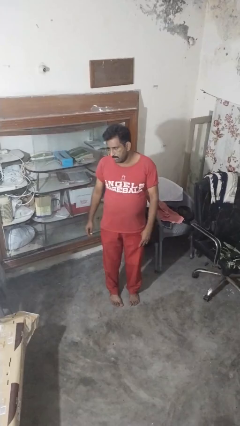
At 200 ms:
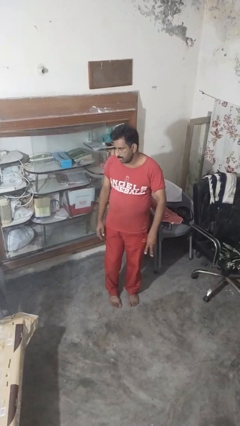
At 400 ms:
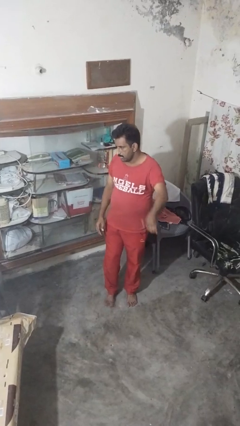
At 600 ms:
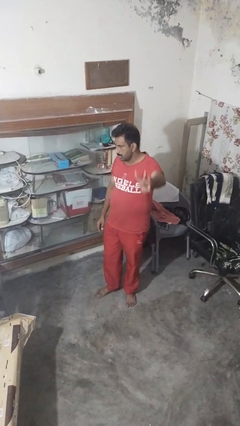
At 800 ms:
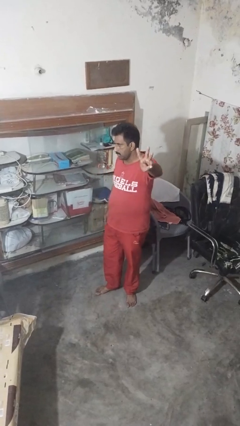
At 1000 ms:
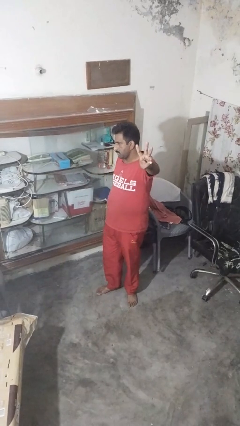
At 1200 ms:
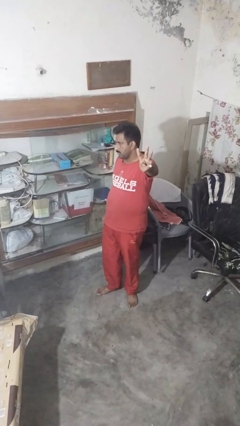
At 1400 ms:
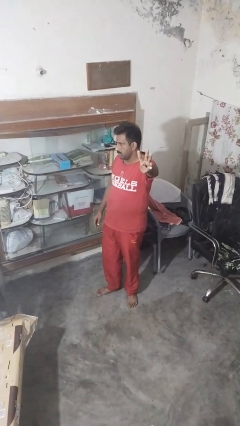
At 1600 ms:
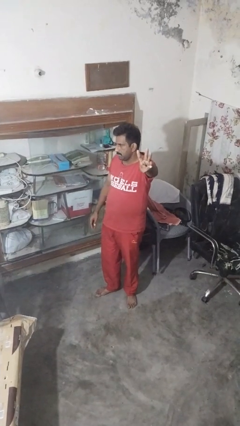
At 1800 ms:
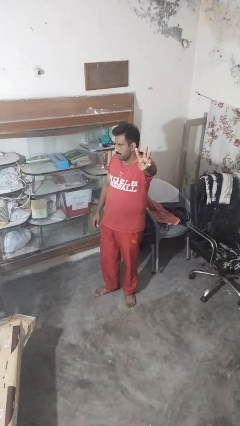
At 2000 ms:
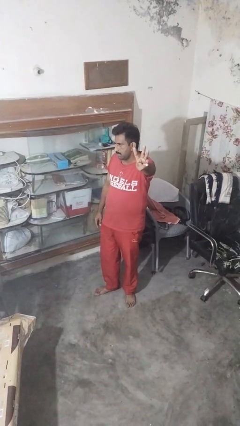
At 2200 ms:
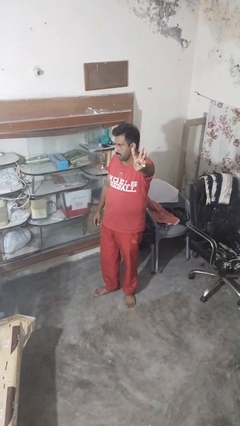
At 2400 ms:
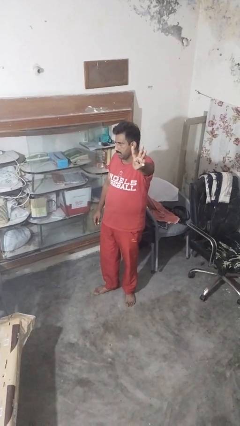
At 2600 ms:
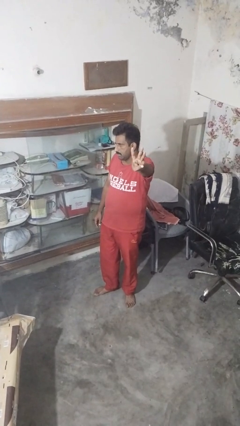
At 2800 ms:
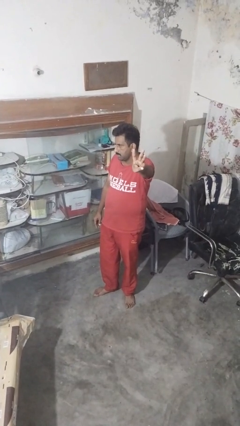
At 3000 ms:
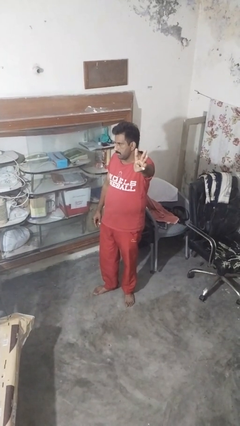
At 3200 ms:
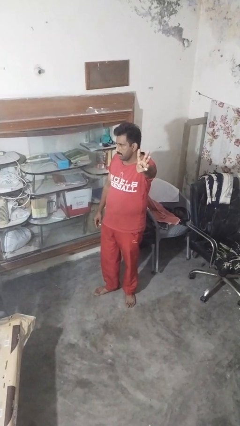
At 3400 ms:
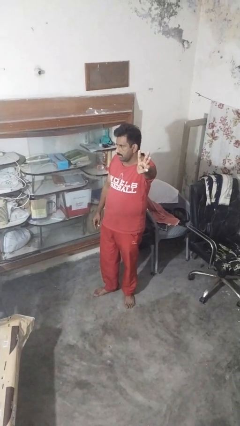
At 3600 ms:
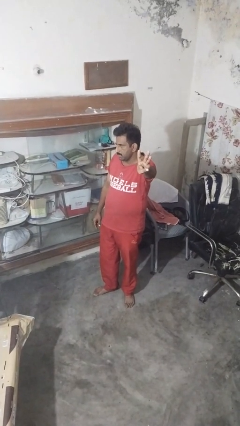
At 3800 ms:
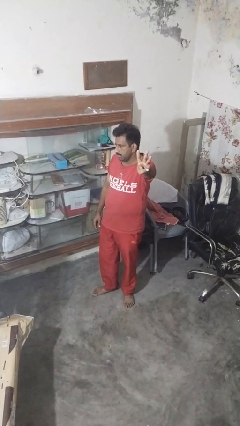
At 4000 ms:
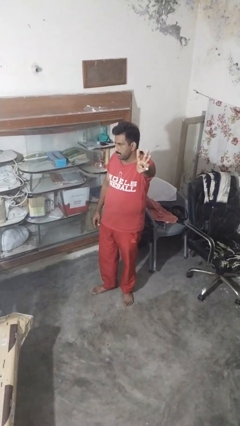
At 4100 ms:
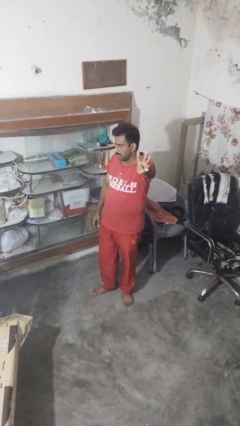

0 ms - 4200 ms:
person gestures number three

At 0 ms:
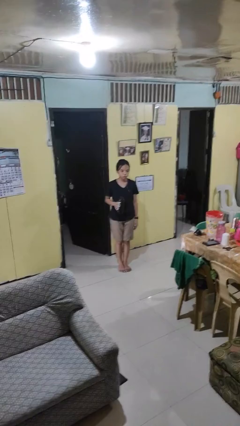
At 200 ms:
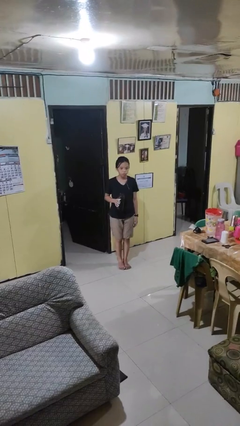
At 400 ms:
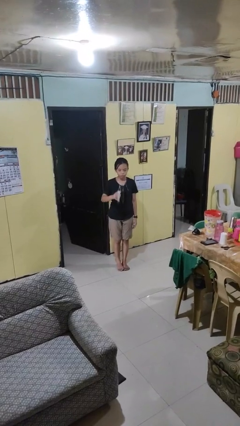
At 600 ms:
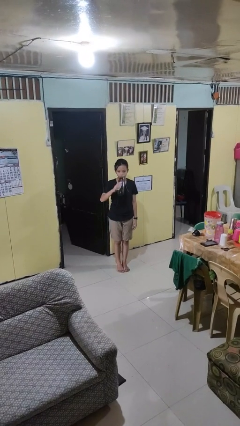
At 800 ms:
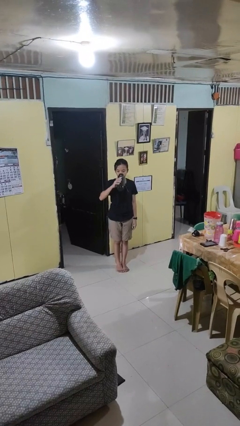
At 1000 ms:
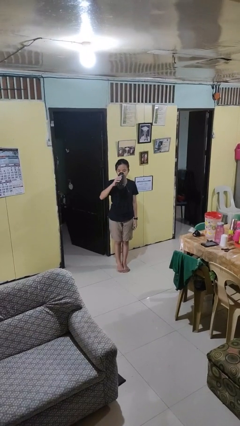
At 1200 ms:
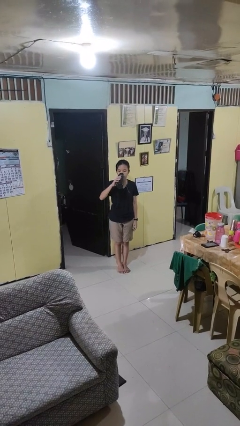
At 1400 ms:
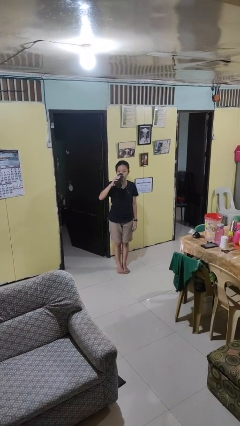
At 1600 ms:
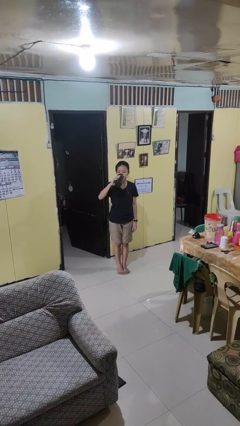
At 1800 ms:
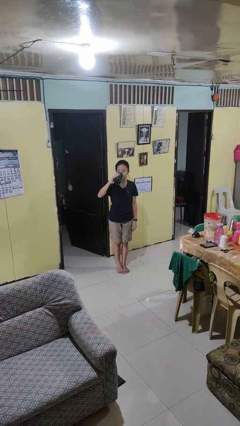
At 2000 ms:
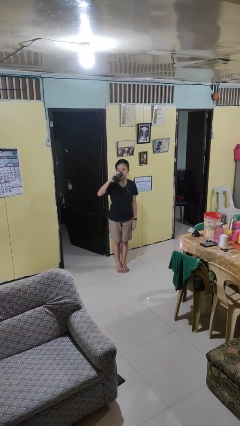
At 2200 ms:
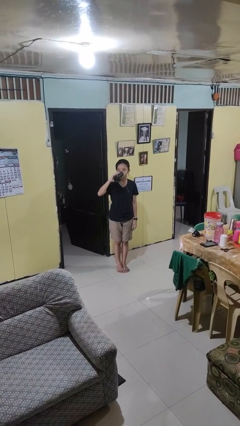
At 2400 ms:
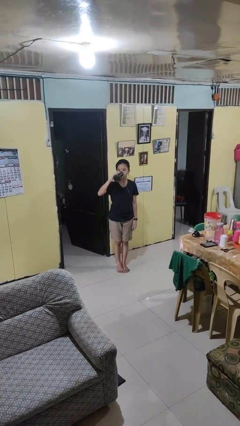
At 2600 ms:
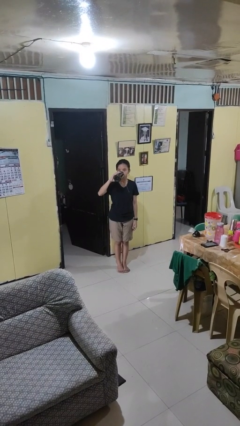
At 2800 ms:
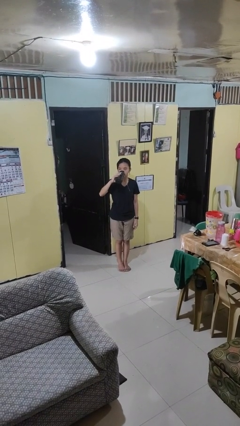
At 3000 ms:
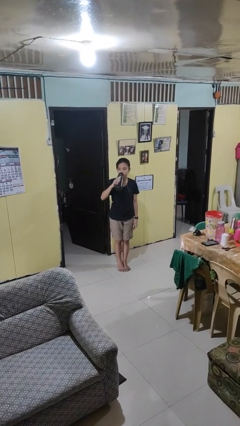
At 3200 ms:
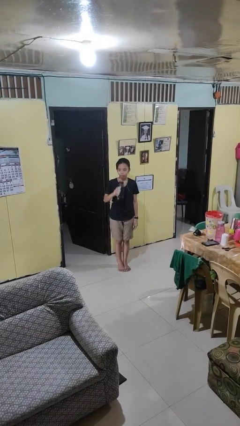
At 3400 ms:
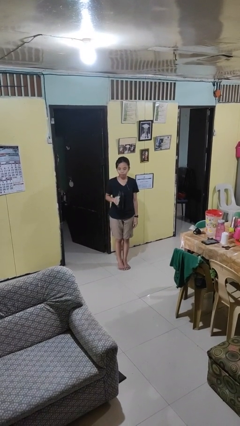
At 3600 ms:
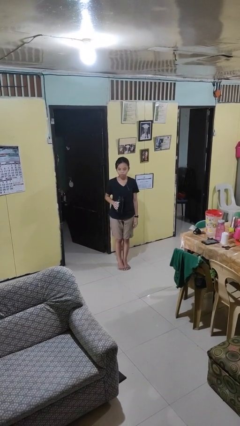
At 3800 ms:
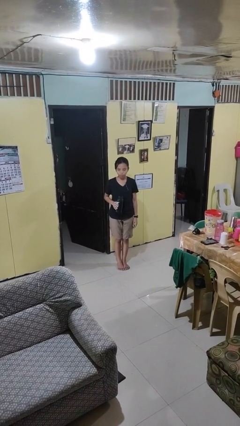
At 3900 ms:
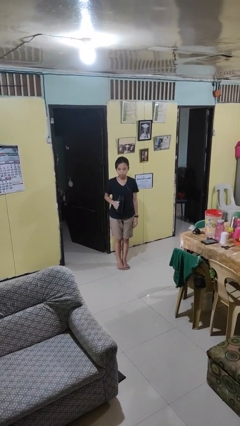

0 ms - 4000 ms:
person drinks from bottle

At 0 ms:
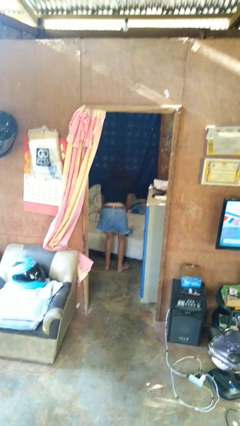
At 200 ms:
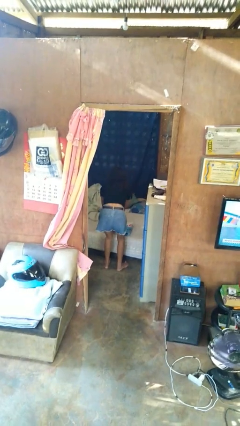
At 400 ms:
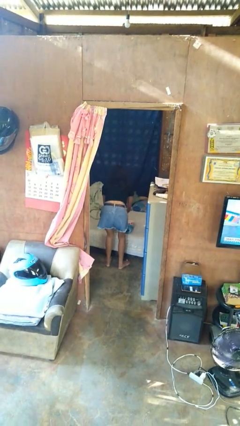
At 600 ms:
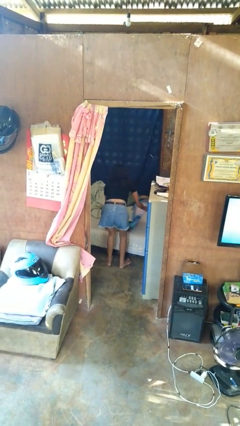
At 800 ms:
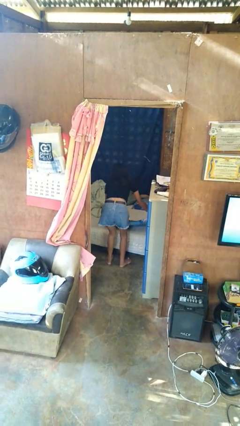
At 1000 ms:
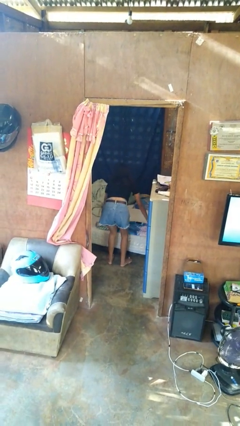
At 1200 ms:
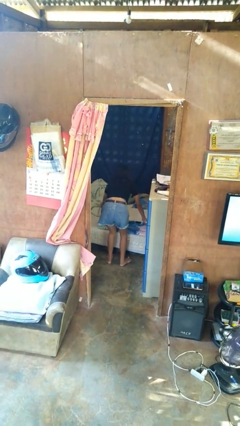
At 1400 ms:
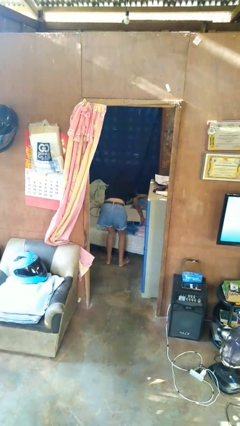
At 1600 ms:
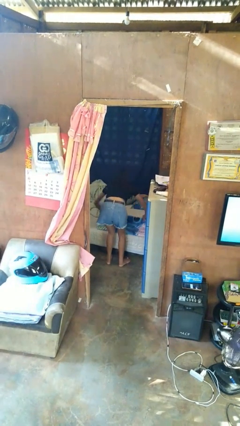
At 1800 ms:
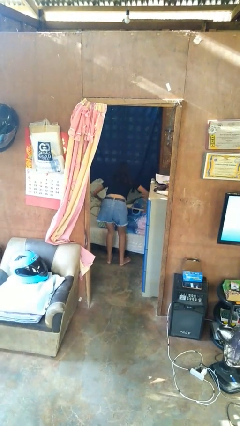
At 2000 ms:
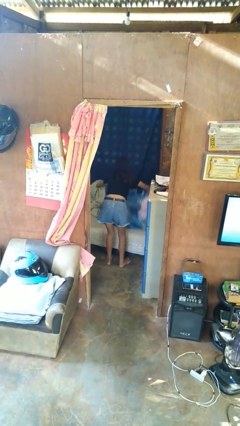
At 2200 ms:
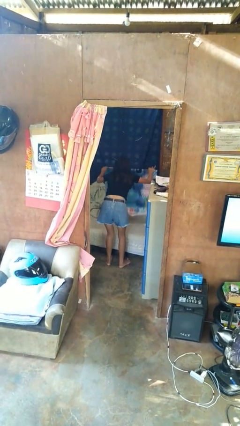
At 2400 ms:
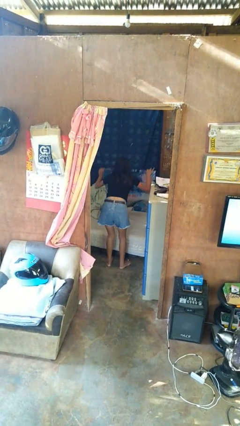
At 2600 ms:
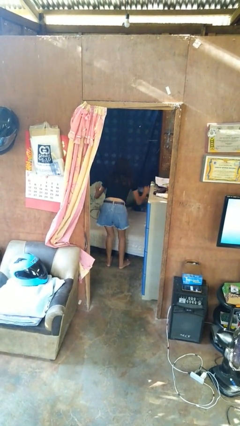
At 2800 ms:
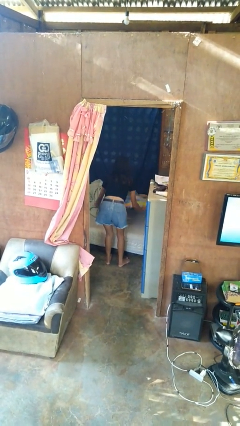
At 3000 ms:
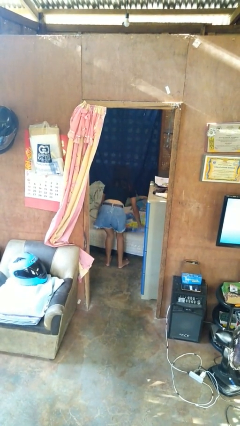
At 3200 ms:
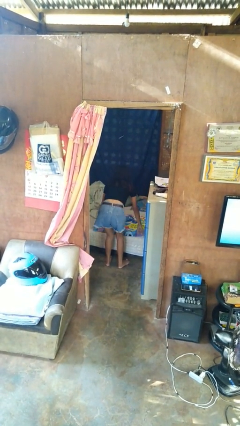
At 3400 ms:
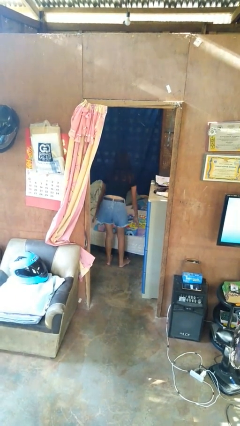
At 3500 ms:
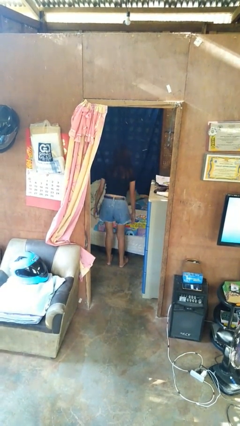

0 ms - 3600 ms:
person unfolds blanket

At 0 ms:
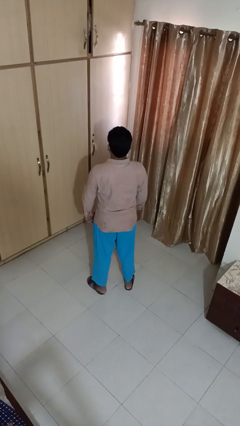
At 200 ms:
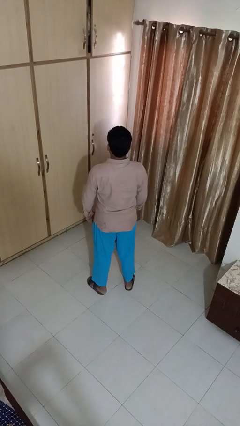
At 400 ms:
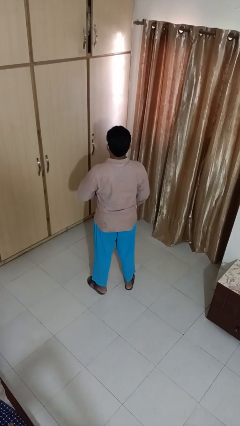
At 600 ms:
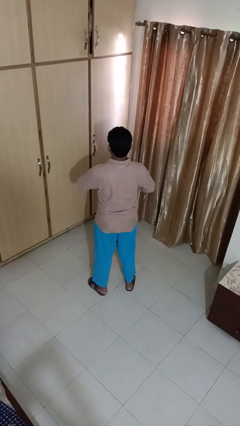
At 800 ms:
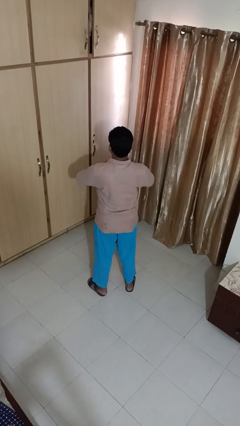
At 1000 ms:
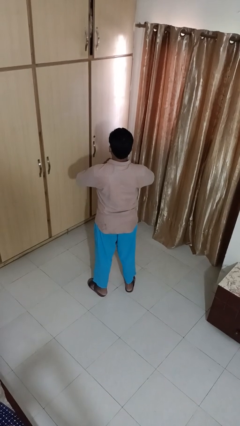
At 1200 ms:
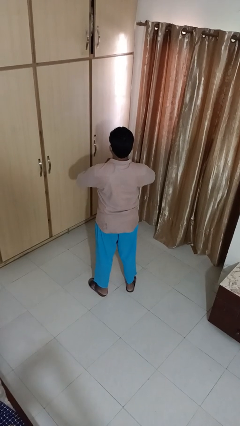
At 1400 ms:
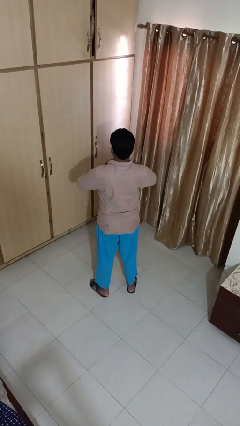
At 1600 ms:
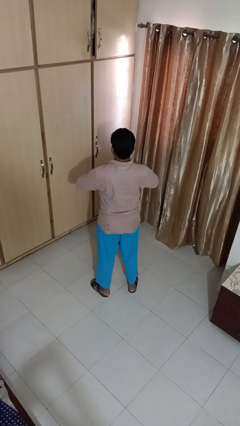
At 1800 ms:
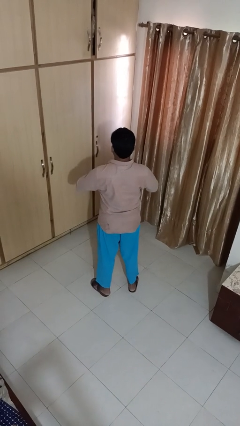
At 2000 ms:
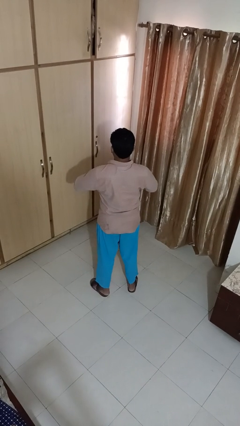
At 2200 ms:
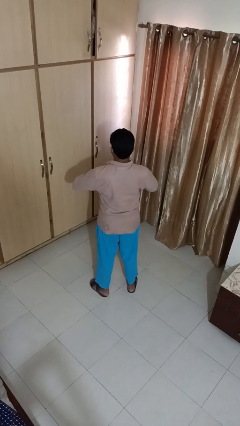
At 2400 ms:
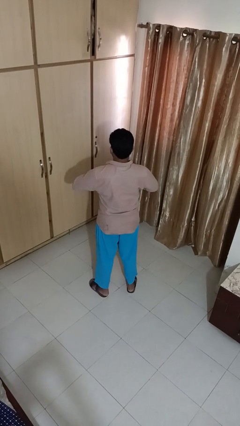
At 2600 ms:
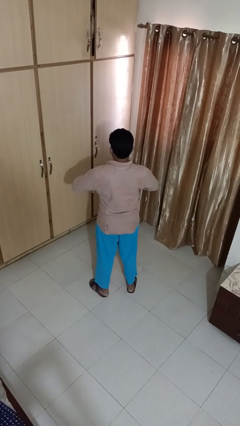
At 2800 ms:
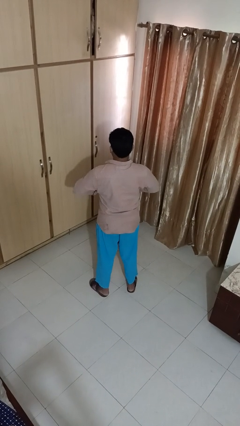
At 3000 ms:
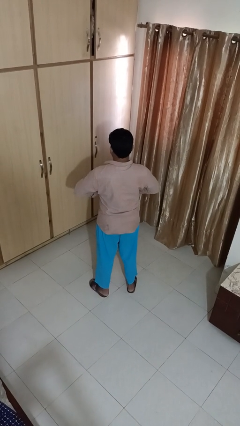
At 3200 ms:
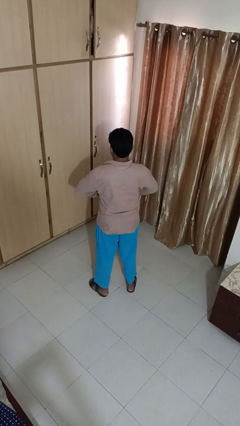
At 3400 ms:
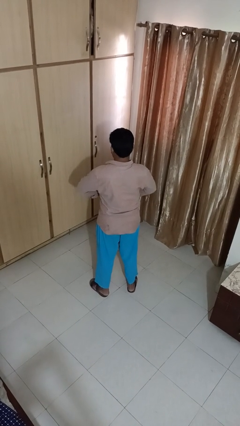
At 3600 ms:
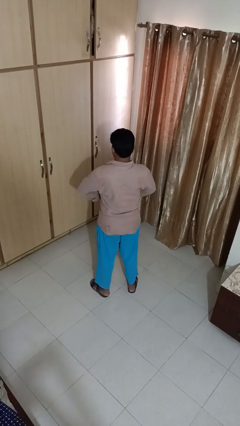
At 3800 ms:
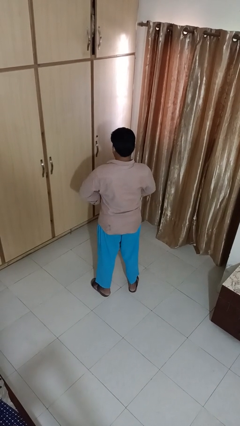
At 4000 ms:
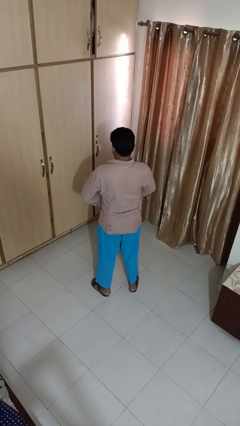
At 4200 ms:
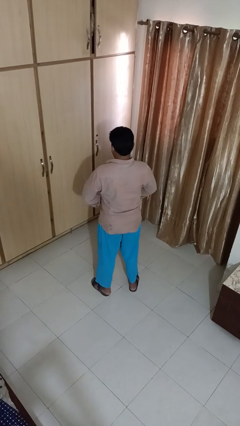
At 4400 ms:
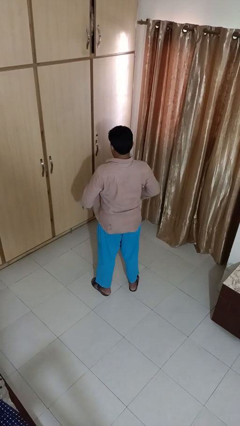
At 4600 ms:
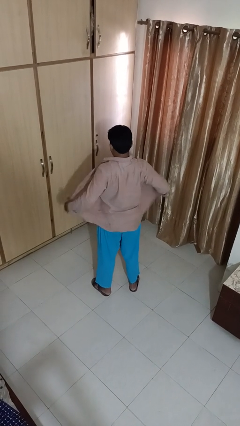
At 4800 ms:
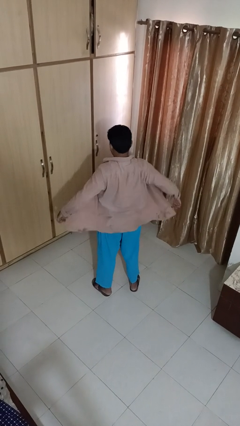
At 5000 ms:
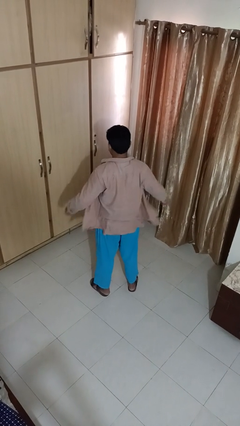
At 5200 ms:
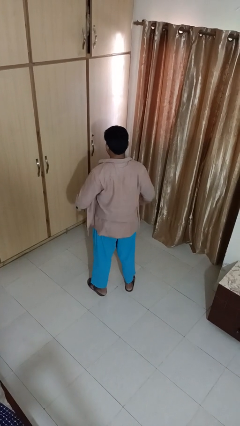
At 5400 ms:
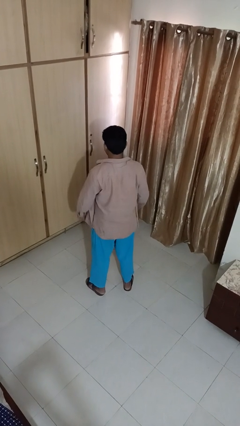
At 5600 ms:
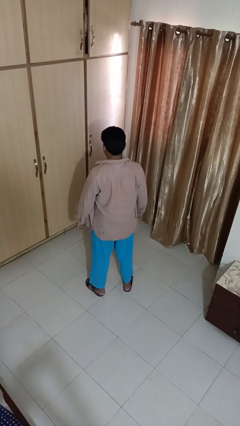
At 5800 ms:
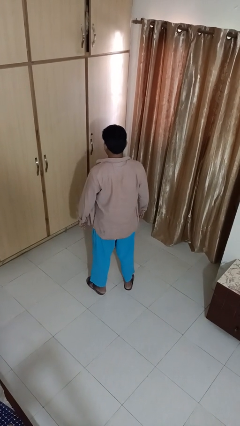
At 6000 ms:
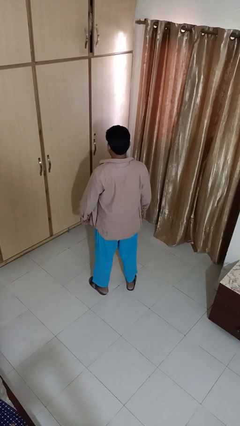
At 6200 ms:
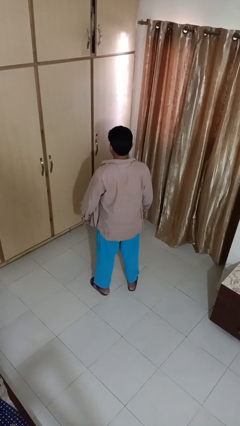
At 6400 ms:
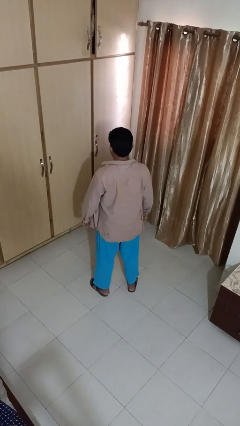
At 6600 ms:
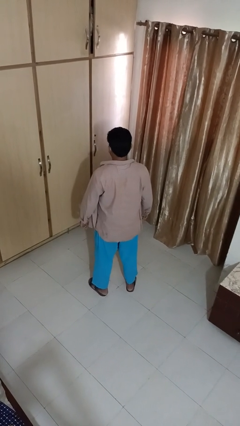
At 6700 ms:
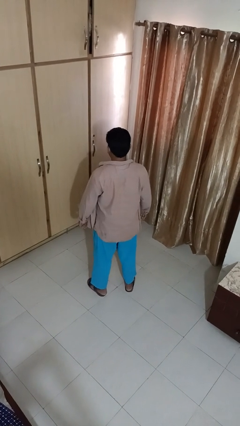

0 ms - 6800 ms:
person unbuttons shirt
